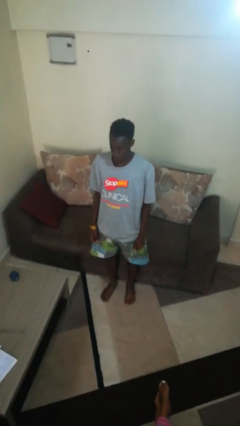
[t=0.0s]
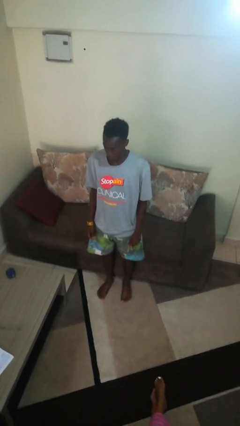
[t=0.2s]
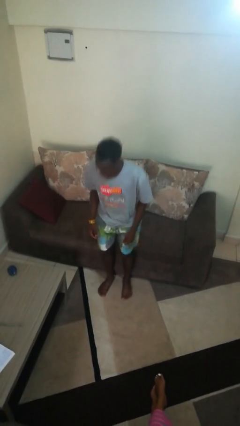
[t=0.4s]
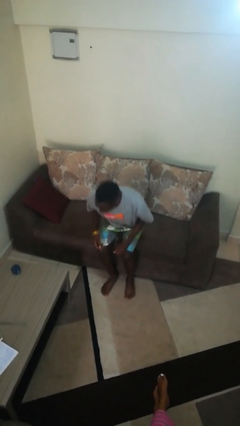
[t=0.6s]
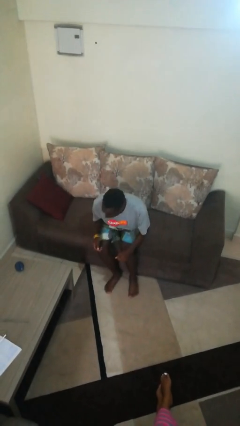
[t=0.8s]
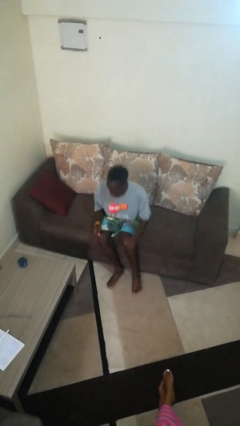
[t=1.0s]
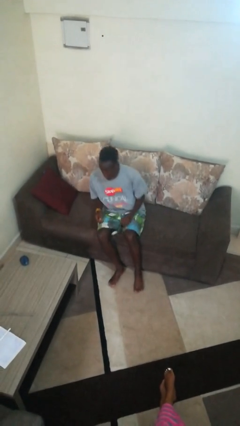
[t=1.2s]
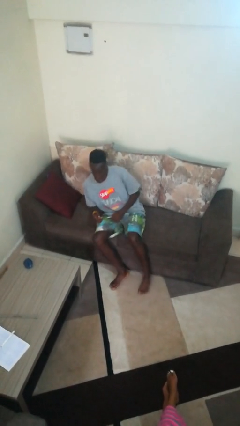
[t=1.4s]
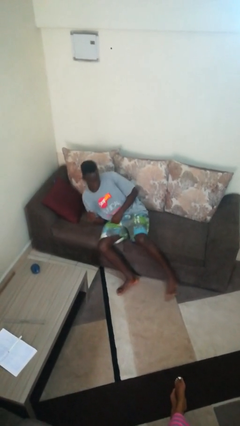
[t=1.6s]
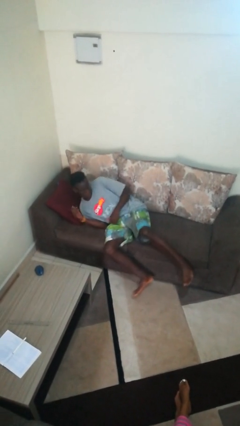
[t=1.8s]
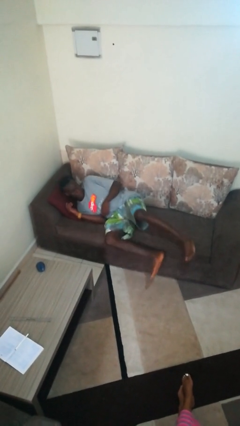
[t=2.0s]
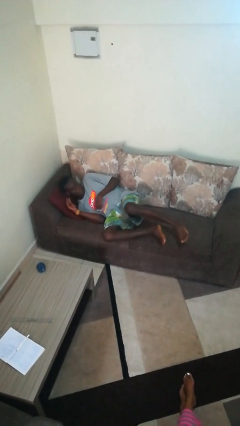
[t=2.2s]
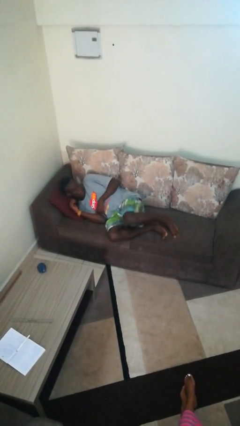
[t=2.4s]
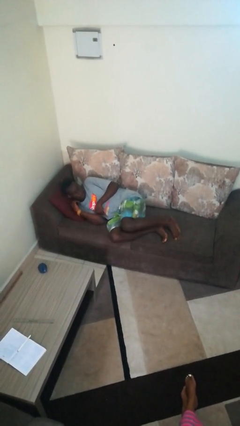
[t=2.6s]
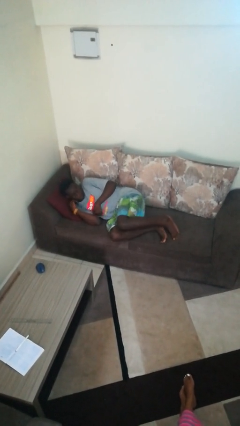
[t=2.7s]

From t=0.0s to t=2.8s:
person lies down on couch

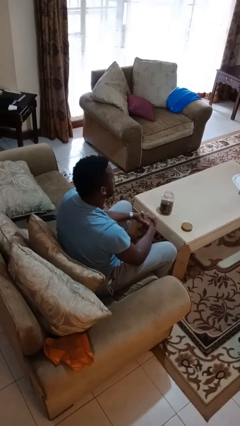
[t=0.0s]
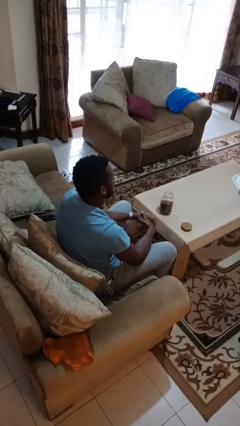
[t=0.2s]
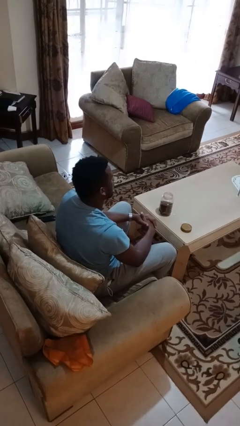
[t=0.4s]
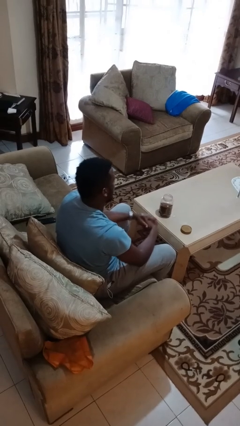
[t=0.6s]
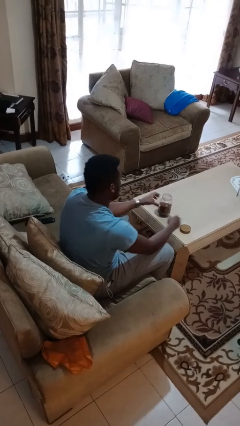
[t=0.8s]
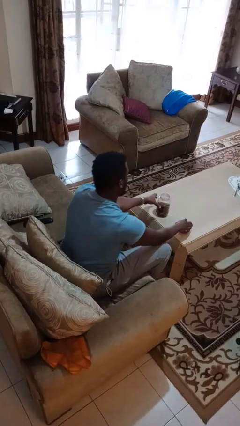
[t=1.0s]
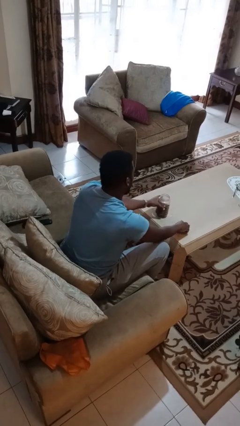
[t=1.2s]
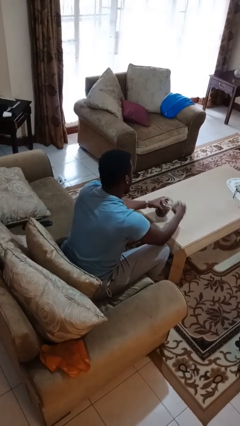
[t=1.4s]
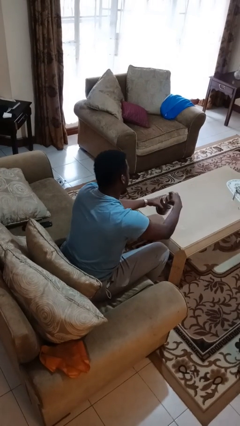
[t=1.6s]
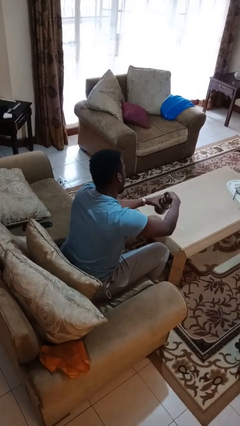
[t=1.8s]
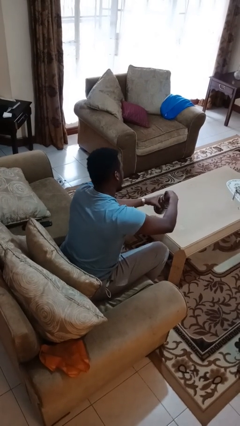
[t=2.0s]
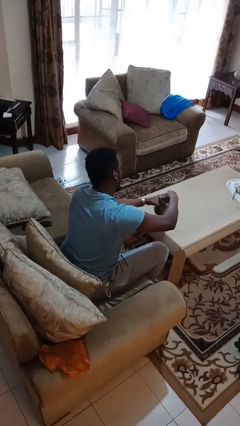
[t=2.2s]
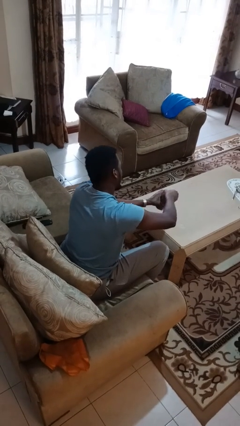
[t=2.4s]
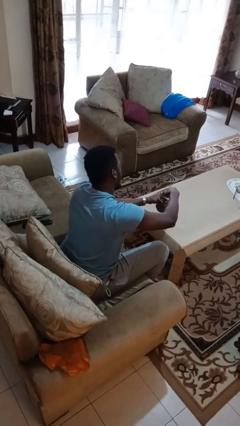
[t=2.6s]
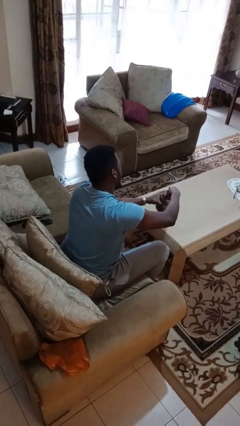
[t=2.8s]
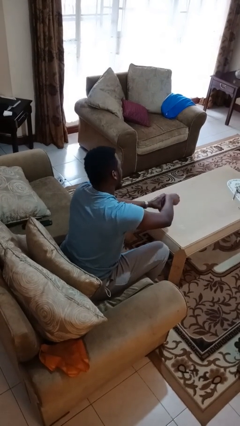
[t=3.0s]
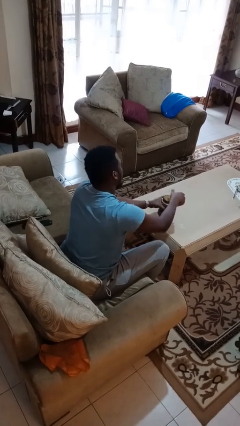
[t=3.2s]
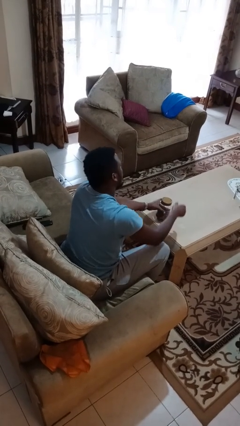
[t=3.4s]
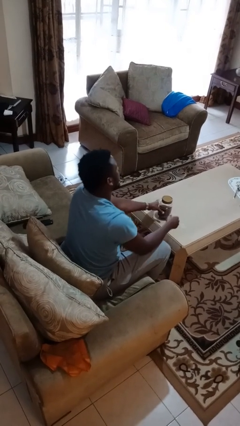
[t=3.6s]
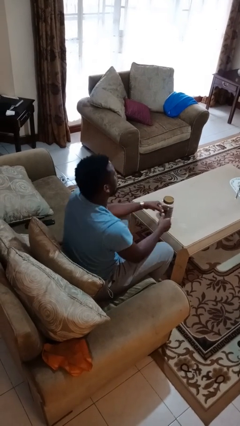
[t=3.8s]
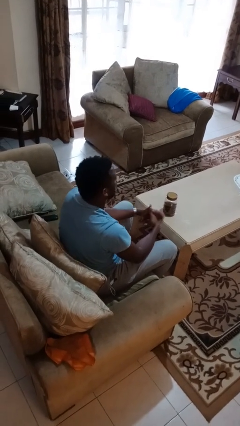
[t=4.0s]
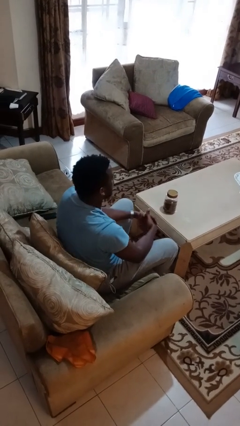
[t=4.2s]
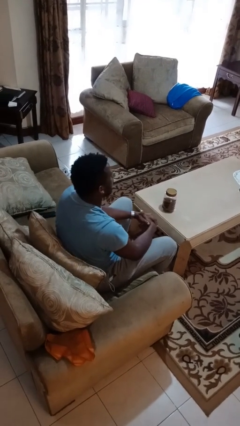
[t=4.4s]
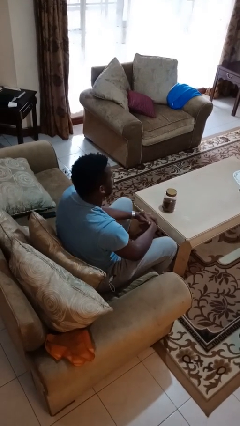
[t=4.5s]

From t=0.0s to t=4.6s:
person closes jar

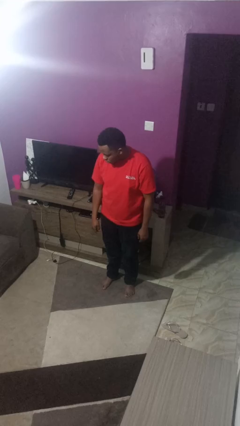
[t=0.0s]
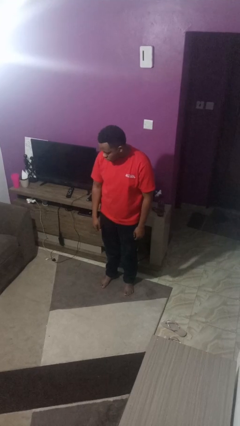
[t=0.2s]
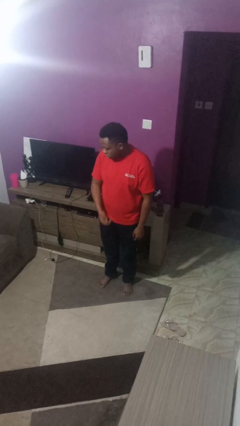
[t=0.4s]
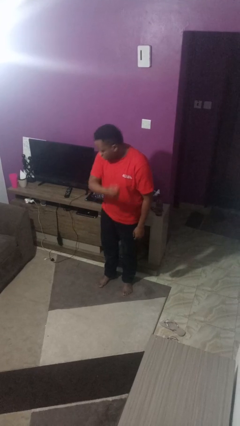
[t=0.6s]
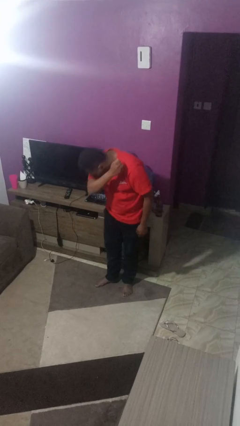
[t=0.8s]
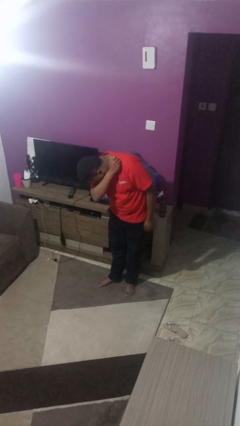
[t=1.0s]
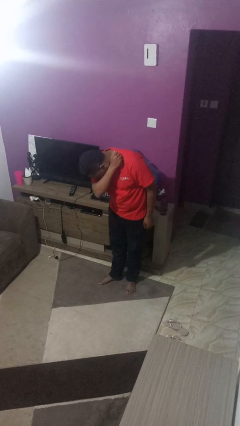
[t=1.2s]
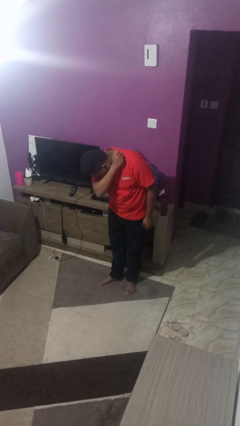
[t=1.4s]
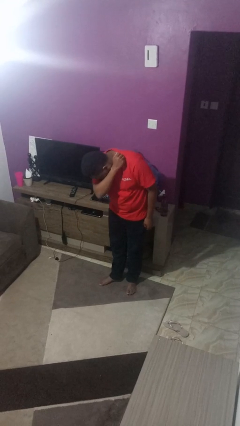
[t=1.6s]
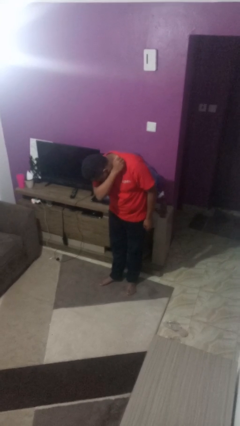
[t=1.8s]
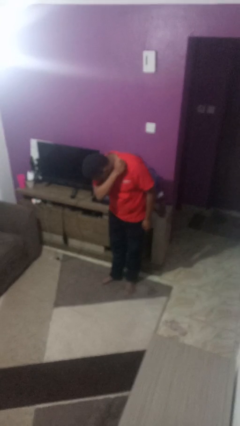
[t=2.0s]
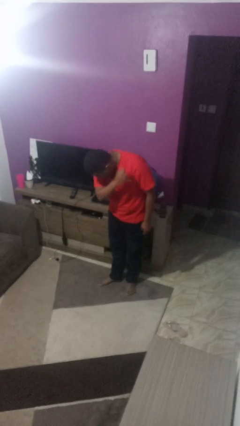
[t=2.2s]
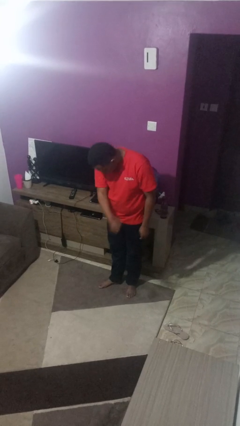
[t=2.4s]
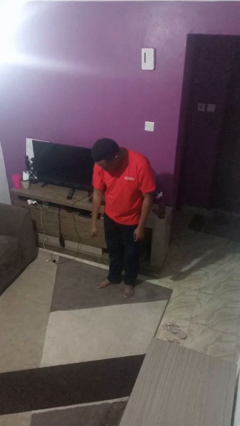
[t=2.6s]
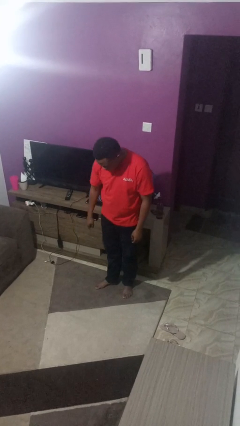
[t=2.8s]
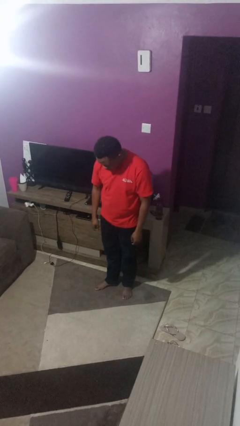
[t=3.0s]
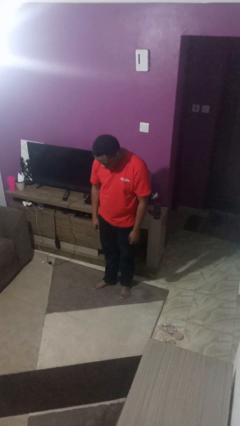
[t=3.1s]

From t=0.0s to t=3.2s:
person sneezes into arm

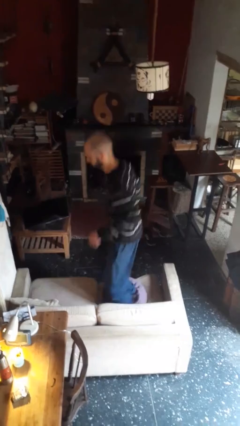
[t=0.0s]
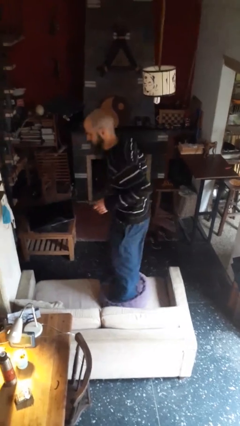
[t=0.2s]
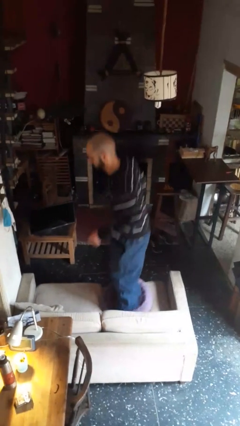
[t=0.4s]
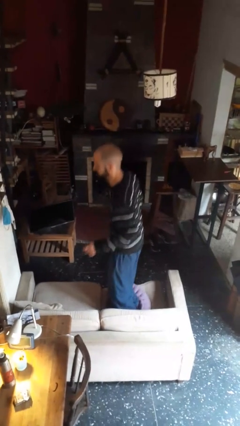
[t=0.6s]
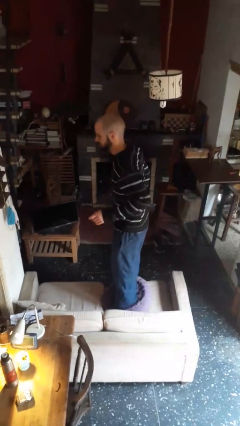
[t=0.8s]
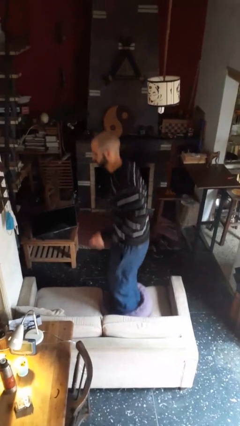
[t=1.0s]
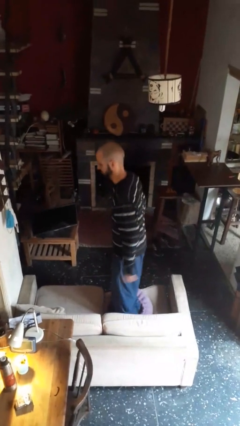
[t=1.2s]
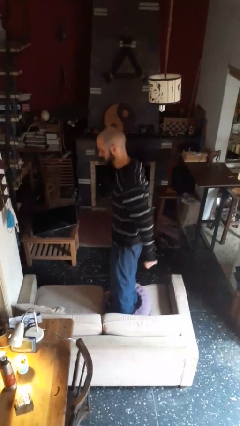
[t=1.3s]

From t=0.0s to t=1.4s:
person jumps on couch

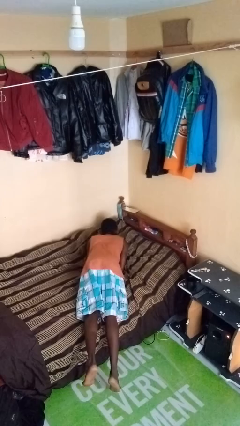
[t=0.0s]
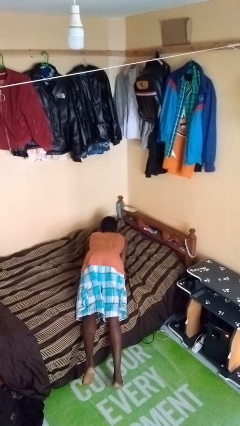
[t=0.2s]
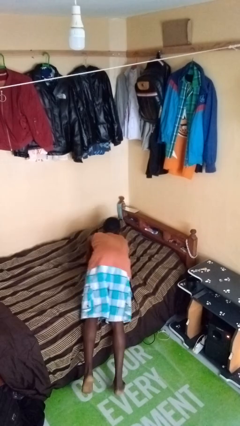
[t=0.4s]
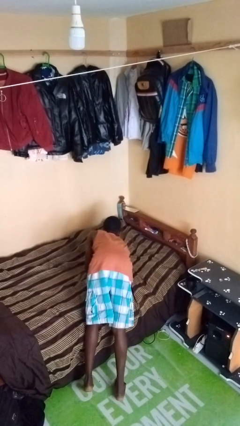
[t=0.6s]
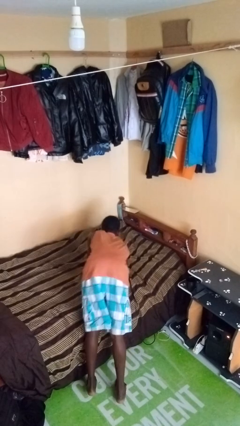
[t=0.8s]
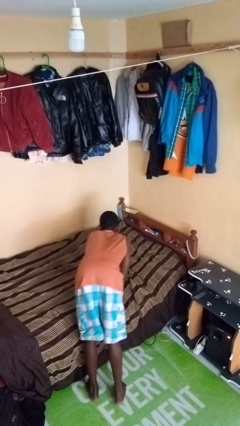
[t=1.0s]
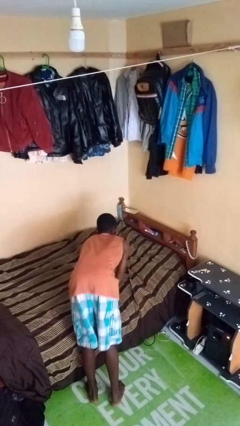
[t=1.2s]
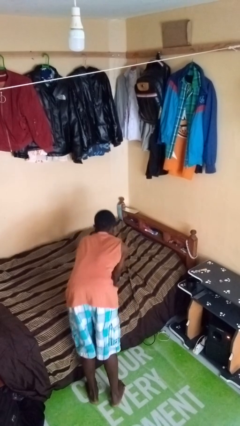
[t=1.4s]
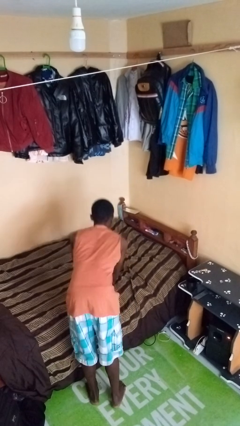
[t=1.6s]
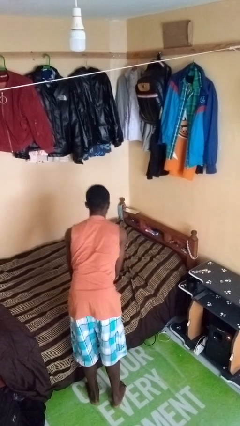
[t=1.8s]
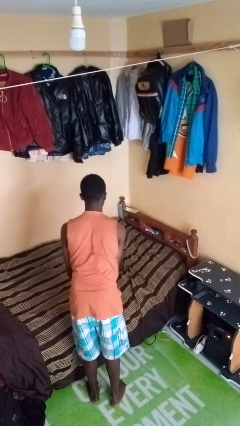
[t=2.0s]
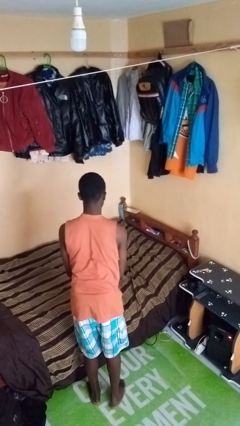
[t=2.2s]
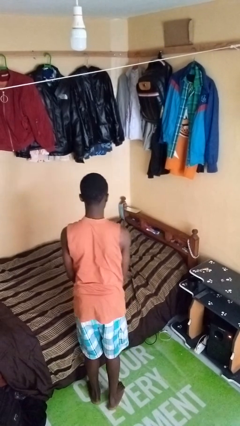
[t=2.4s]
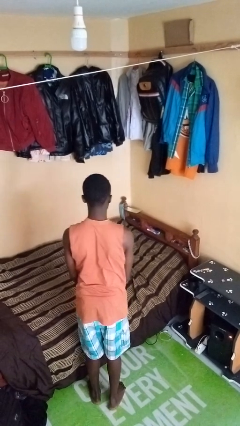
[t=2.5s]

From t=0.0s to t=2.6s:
person stands up

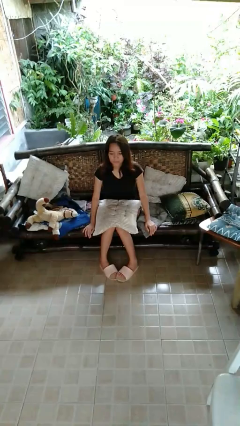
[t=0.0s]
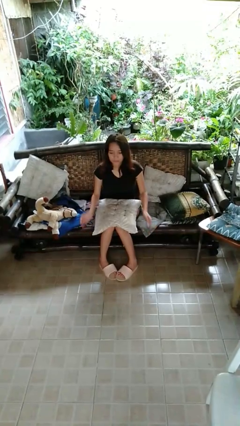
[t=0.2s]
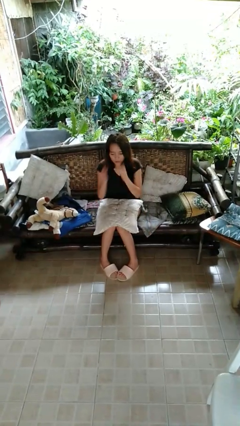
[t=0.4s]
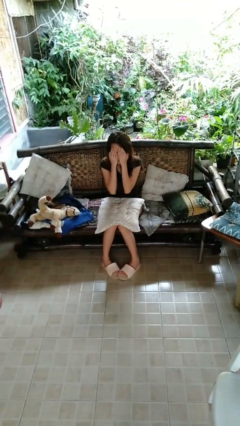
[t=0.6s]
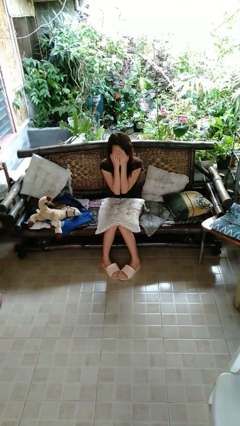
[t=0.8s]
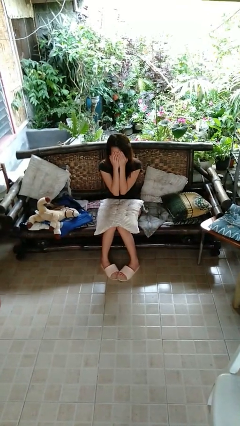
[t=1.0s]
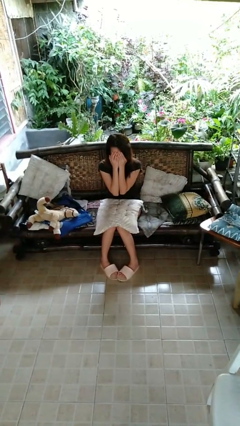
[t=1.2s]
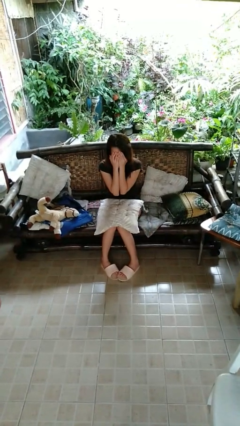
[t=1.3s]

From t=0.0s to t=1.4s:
person covers face with hands

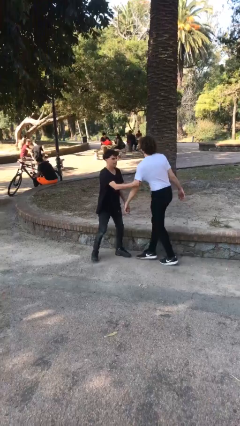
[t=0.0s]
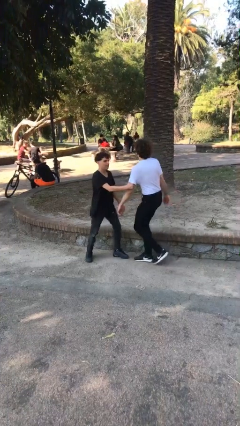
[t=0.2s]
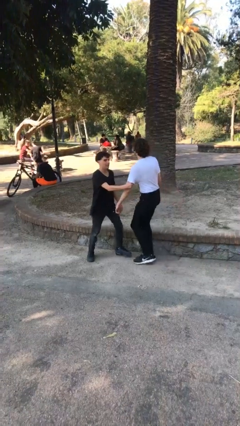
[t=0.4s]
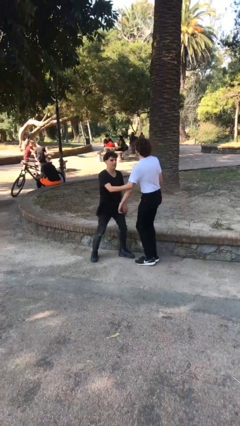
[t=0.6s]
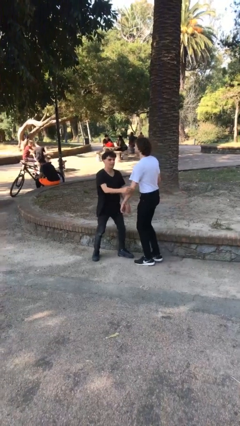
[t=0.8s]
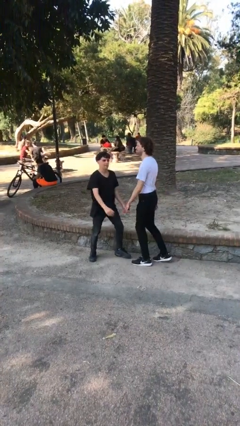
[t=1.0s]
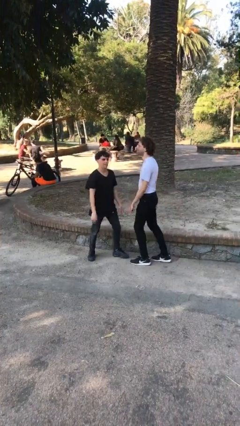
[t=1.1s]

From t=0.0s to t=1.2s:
person grabs person by bicep
